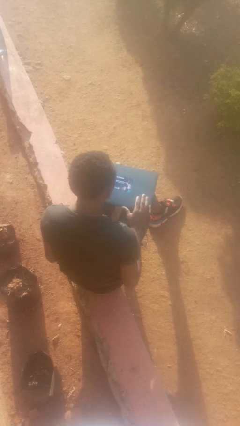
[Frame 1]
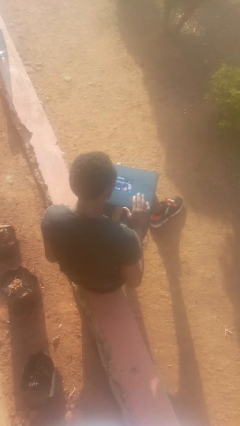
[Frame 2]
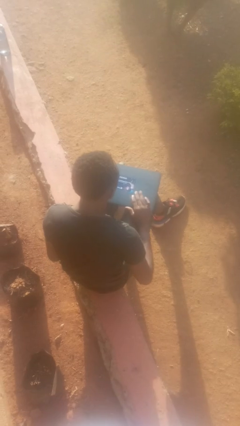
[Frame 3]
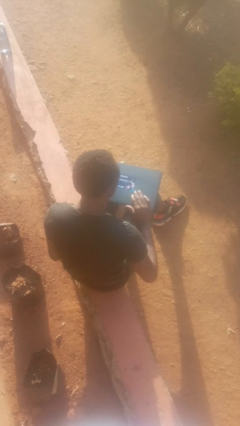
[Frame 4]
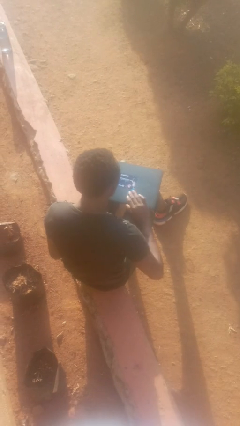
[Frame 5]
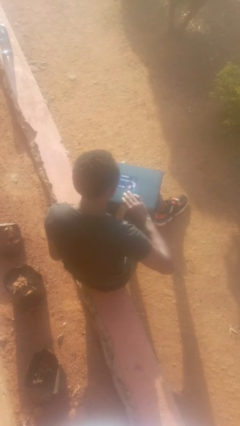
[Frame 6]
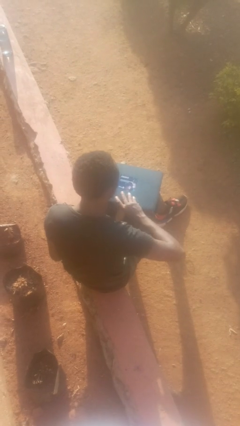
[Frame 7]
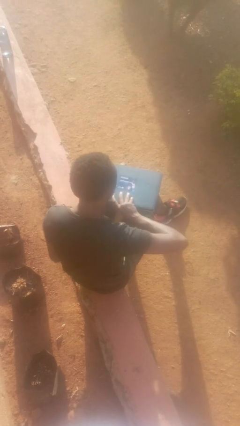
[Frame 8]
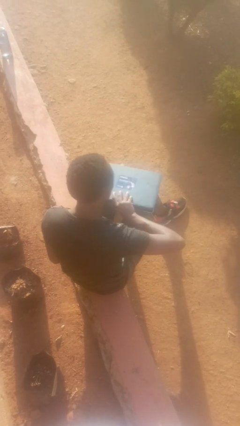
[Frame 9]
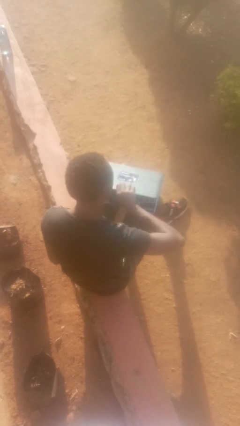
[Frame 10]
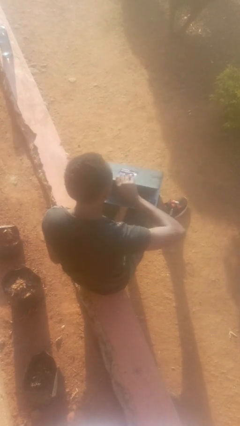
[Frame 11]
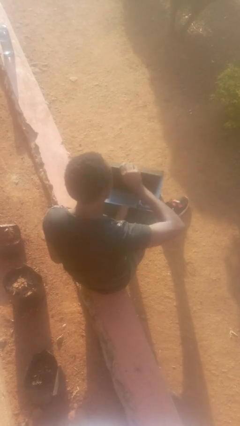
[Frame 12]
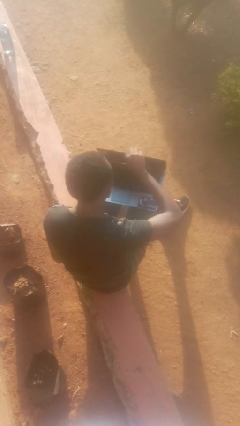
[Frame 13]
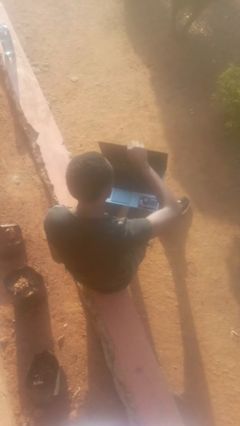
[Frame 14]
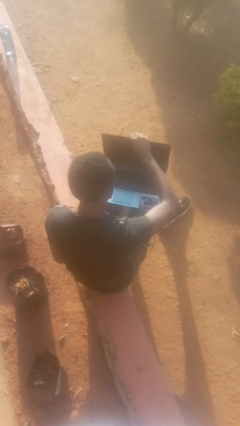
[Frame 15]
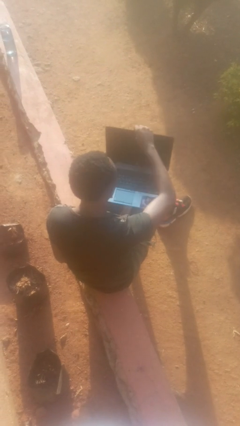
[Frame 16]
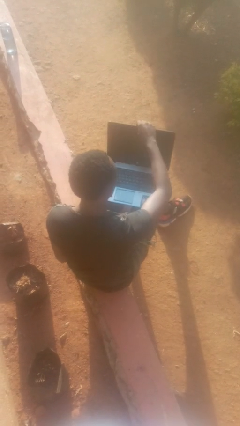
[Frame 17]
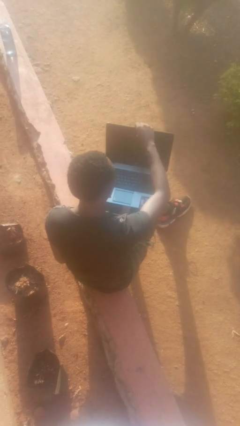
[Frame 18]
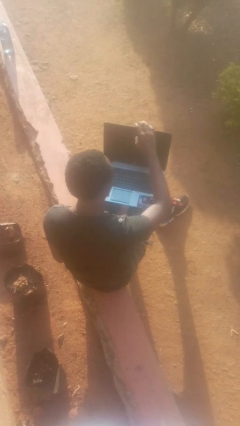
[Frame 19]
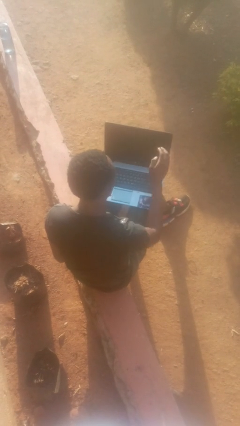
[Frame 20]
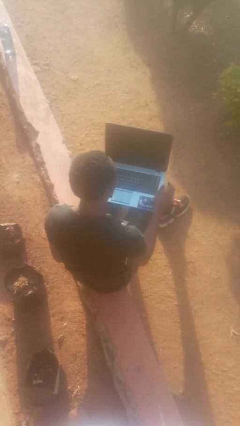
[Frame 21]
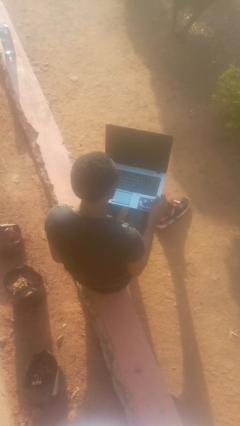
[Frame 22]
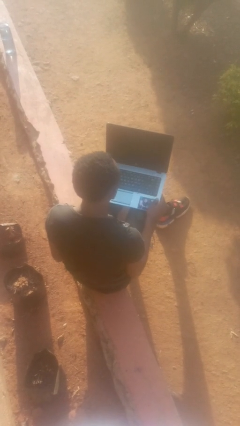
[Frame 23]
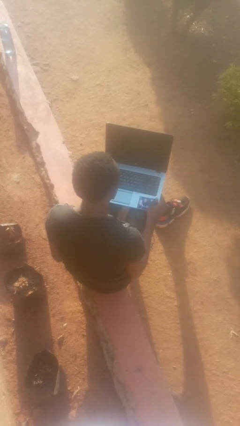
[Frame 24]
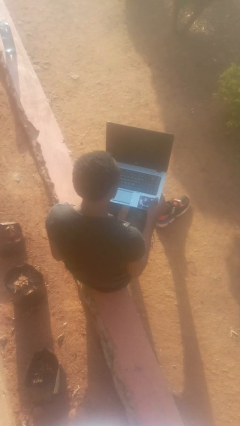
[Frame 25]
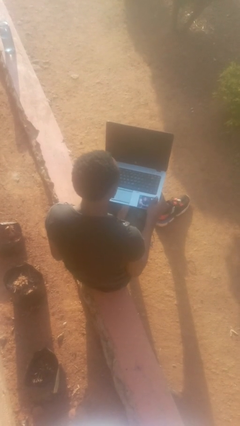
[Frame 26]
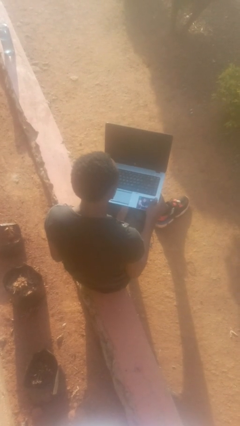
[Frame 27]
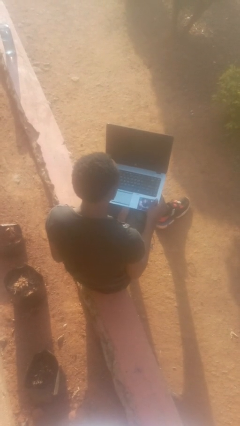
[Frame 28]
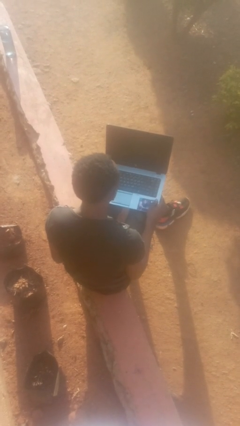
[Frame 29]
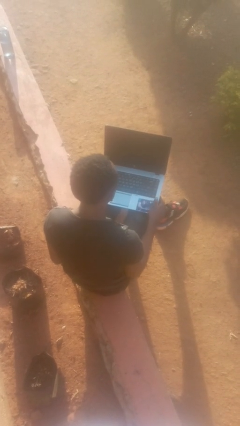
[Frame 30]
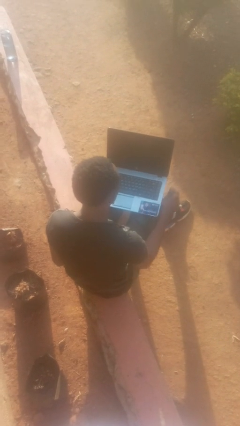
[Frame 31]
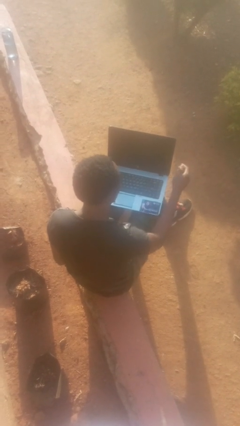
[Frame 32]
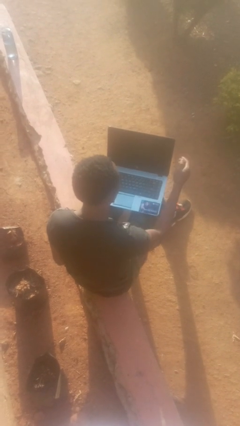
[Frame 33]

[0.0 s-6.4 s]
person opens laptop

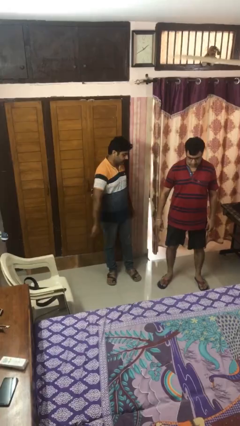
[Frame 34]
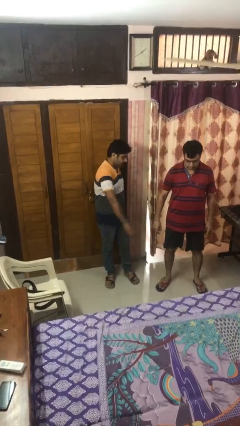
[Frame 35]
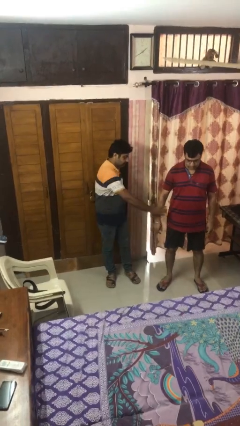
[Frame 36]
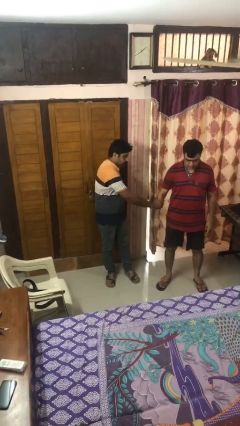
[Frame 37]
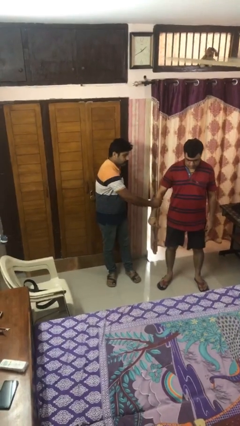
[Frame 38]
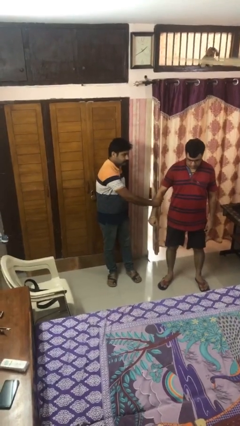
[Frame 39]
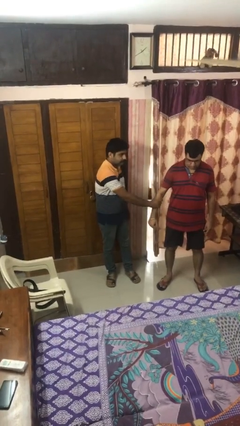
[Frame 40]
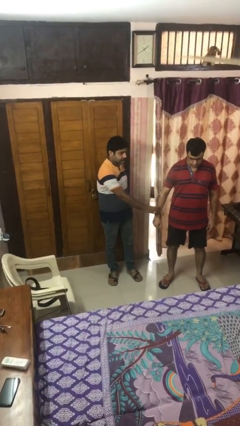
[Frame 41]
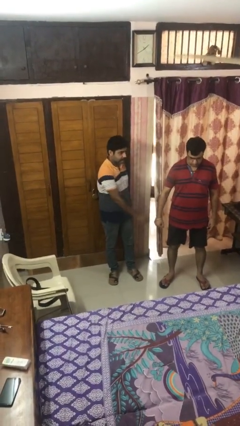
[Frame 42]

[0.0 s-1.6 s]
person grabs person by forearm

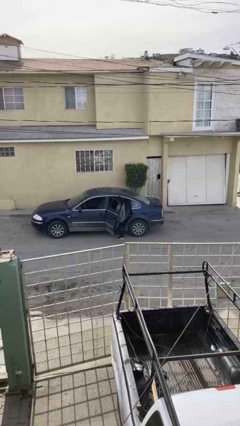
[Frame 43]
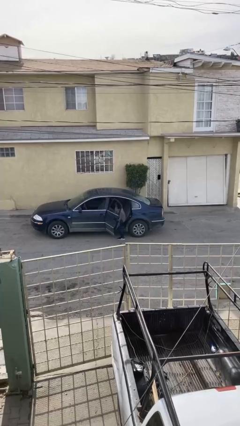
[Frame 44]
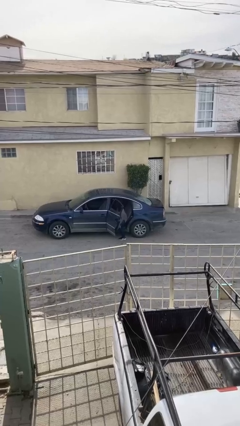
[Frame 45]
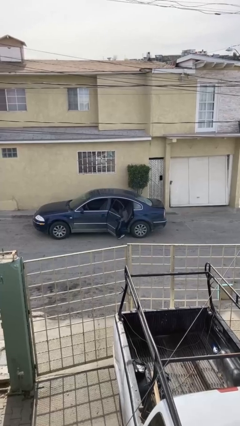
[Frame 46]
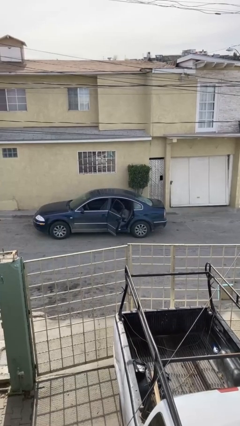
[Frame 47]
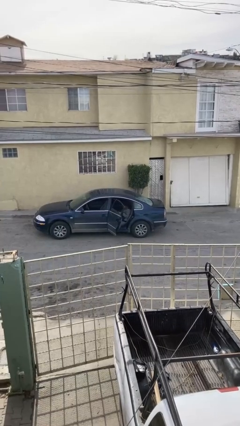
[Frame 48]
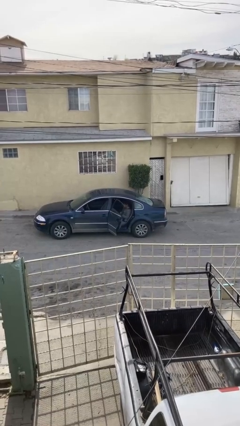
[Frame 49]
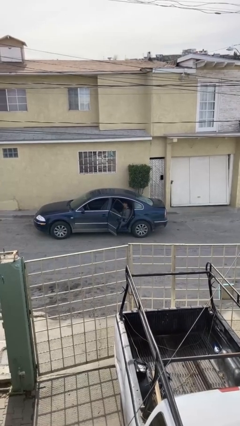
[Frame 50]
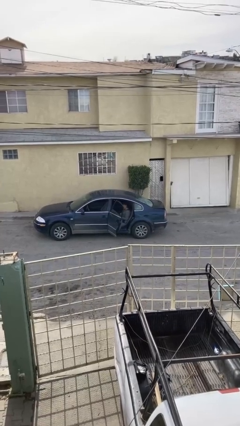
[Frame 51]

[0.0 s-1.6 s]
person enters car

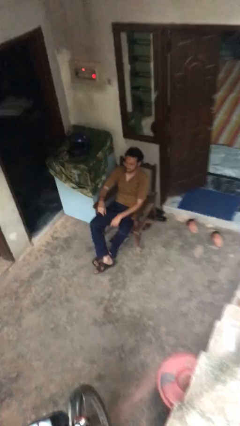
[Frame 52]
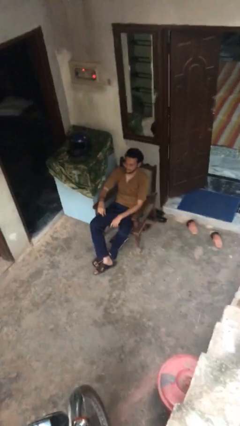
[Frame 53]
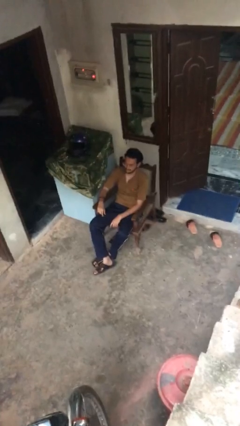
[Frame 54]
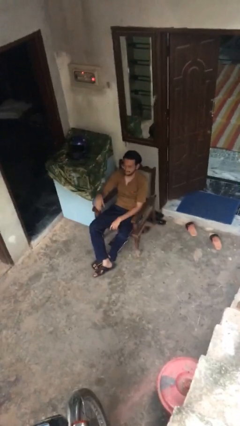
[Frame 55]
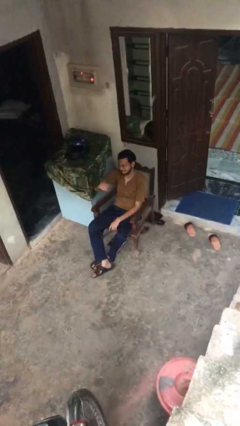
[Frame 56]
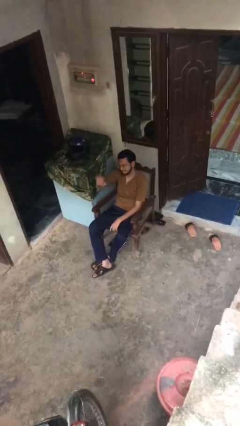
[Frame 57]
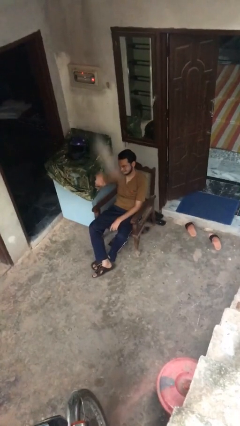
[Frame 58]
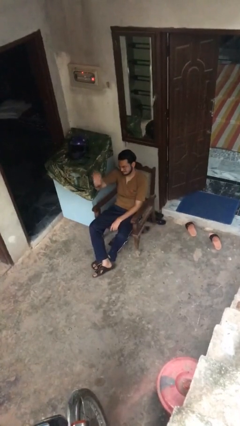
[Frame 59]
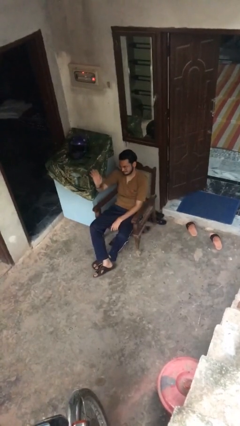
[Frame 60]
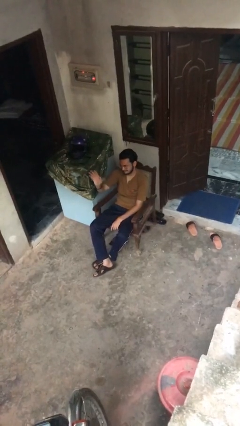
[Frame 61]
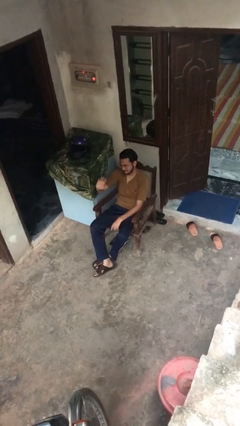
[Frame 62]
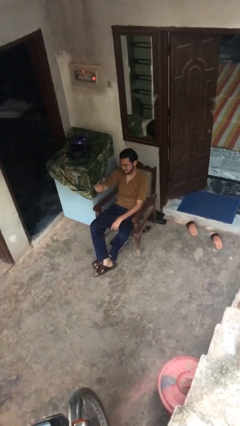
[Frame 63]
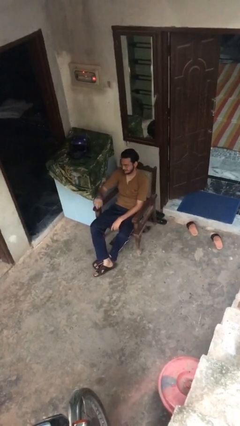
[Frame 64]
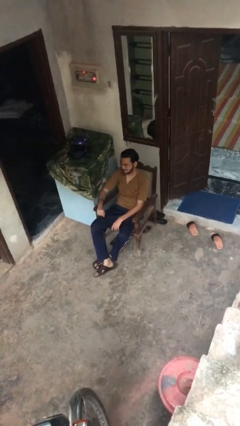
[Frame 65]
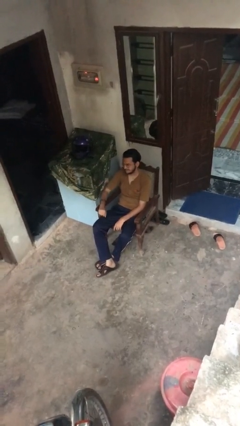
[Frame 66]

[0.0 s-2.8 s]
person waves at person

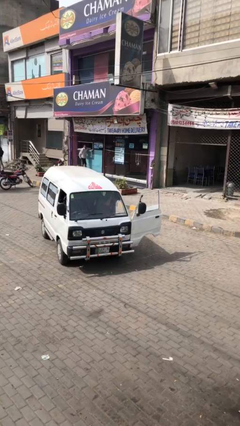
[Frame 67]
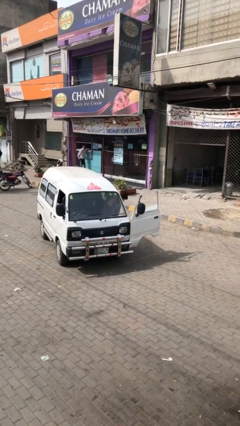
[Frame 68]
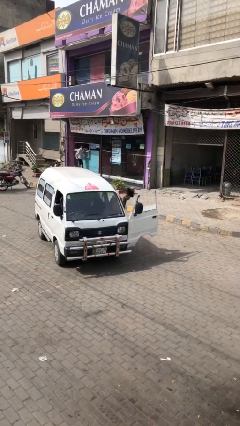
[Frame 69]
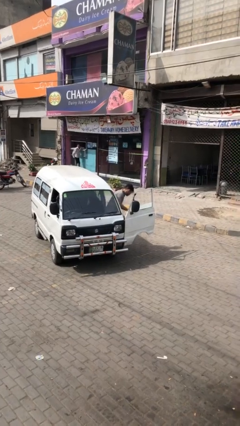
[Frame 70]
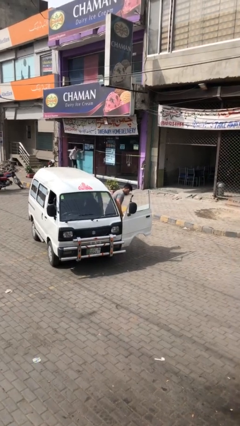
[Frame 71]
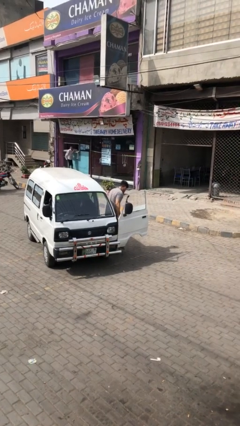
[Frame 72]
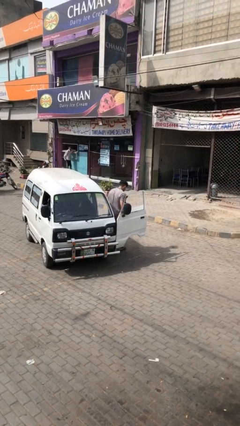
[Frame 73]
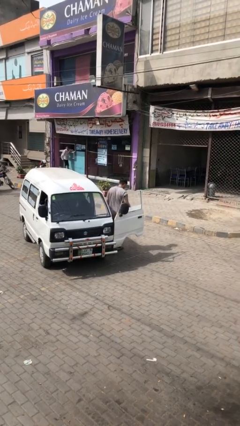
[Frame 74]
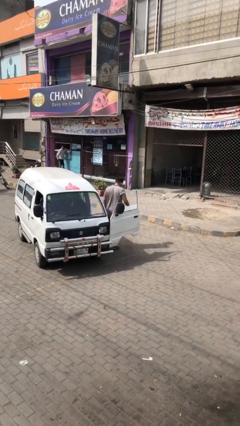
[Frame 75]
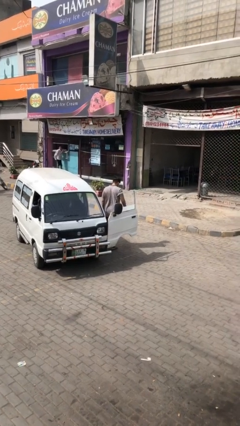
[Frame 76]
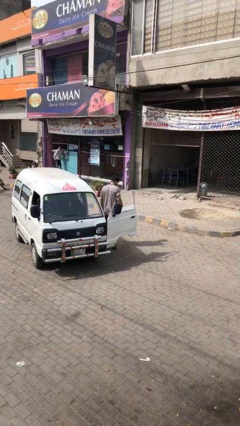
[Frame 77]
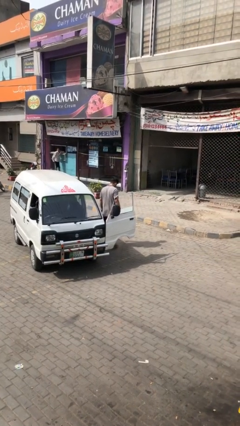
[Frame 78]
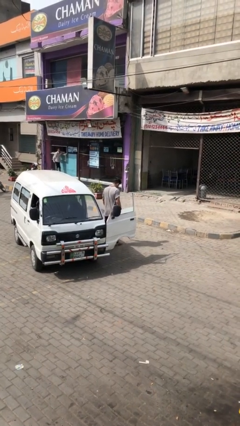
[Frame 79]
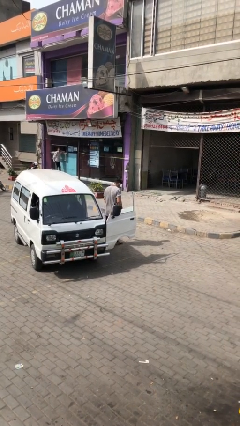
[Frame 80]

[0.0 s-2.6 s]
person exits car

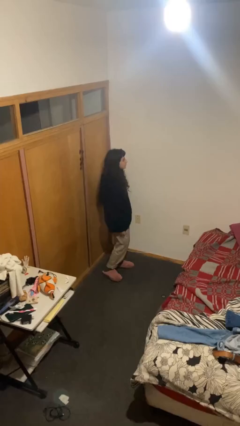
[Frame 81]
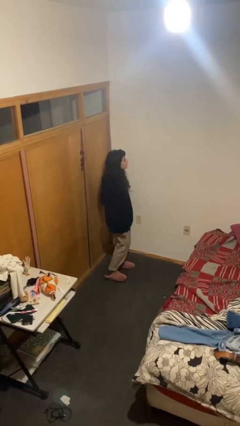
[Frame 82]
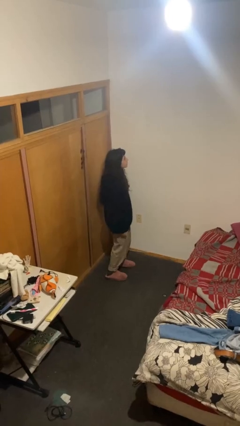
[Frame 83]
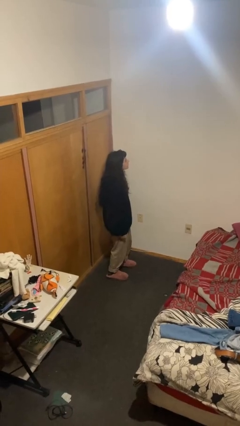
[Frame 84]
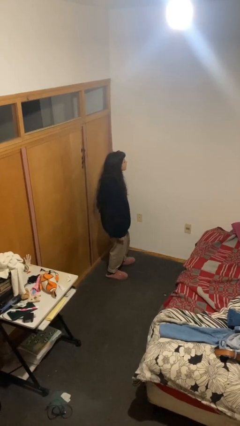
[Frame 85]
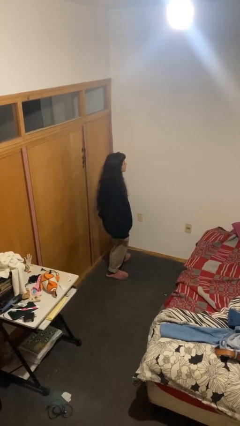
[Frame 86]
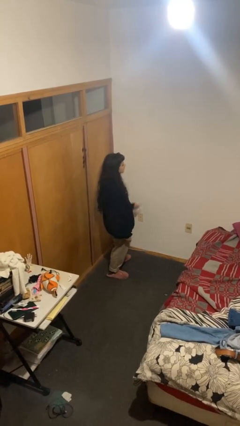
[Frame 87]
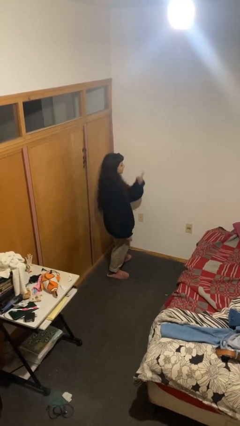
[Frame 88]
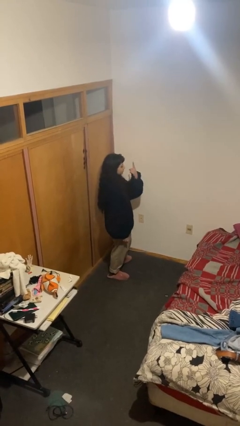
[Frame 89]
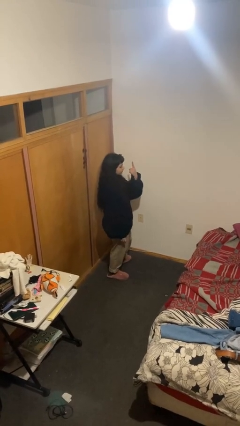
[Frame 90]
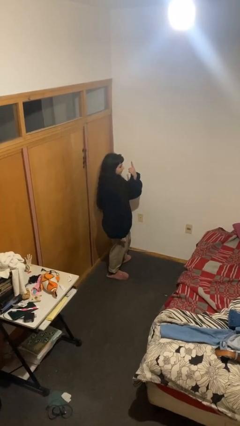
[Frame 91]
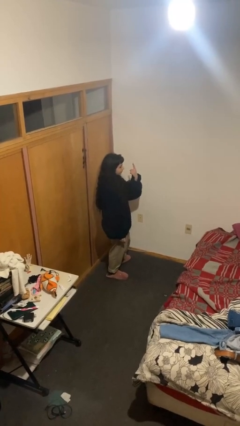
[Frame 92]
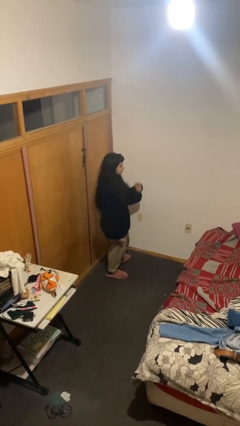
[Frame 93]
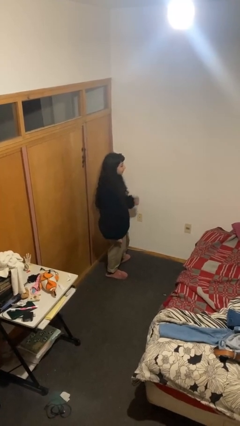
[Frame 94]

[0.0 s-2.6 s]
person gestures number one
